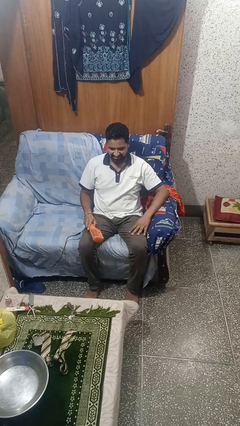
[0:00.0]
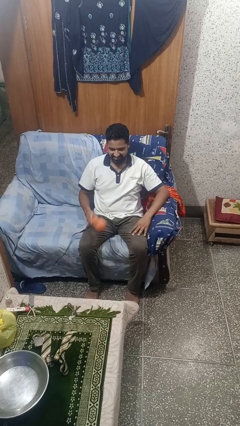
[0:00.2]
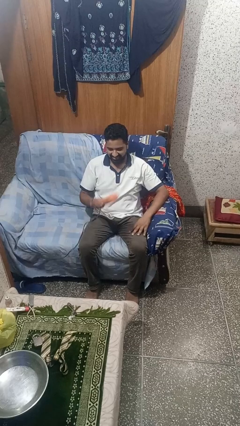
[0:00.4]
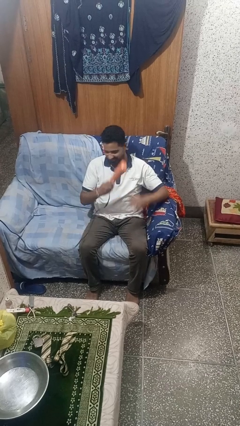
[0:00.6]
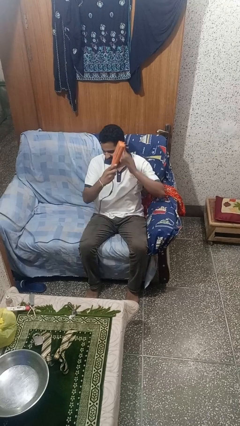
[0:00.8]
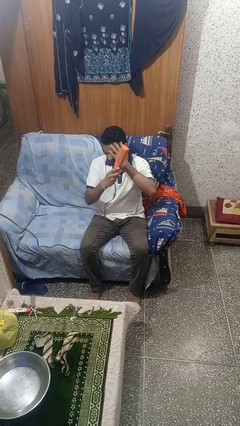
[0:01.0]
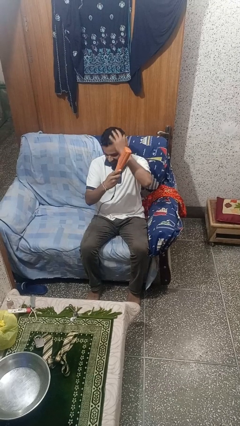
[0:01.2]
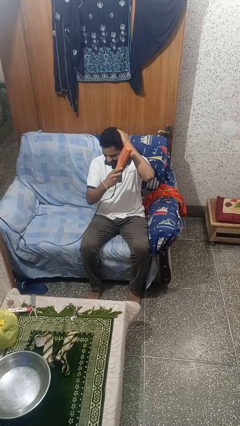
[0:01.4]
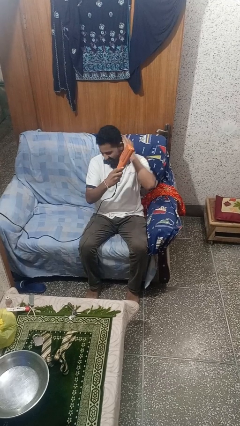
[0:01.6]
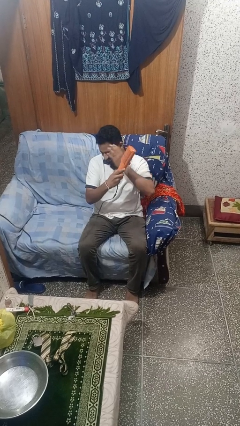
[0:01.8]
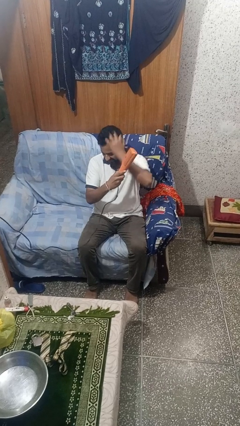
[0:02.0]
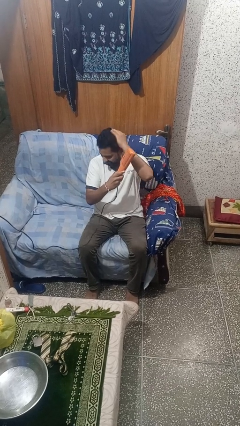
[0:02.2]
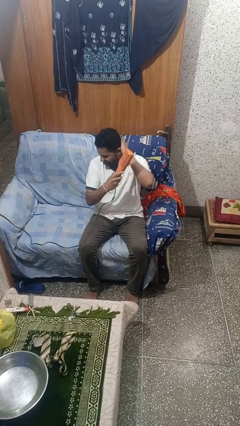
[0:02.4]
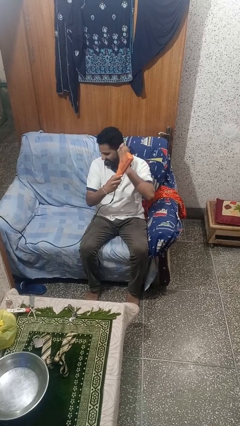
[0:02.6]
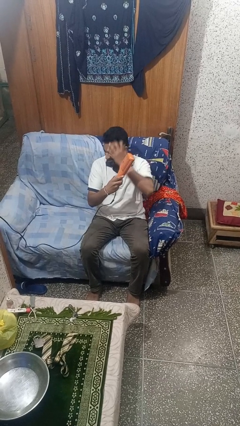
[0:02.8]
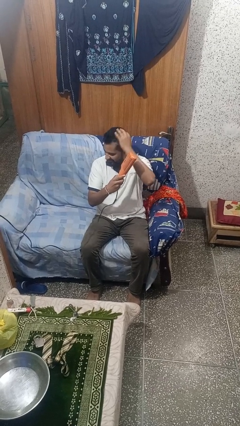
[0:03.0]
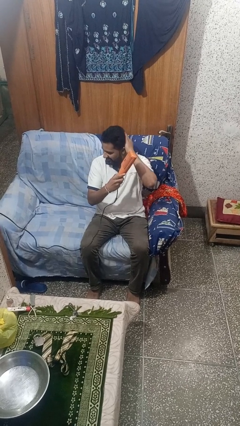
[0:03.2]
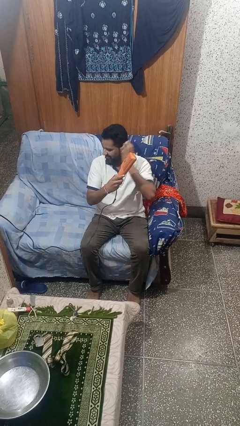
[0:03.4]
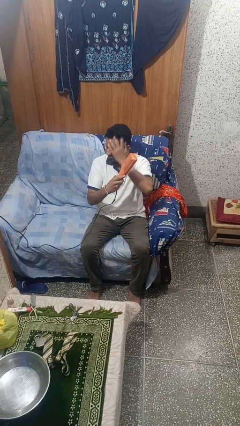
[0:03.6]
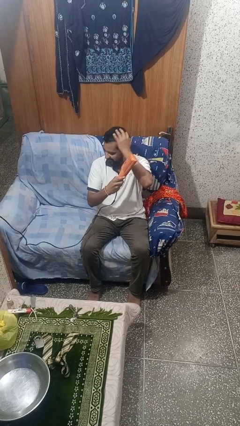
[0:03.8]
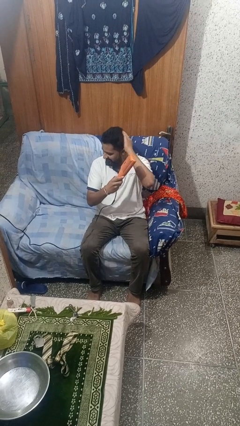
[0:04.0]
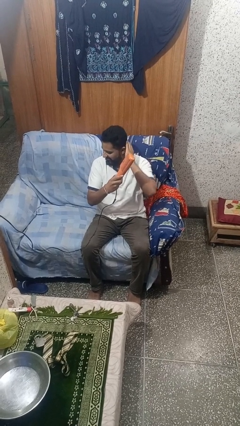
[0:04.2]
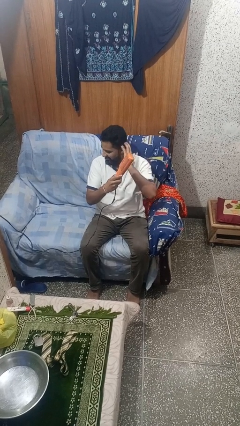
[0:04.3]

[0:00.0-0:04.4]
person dries hair with hairdryer

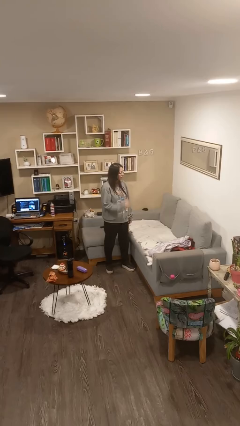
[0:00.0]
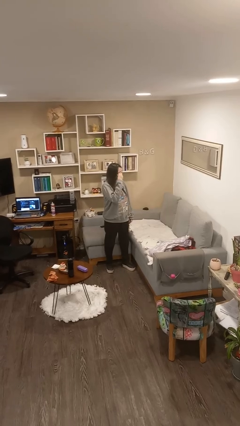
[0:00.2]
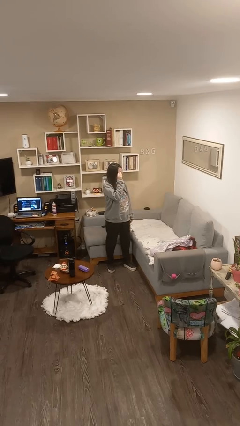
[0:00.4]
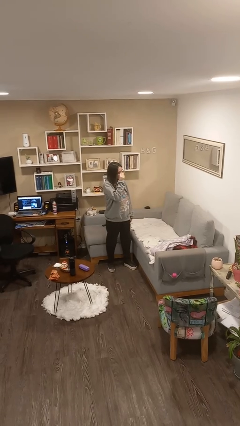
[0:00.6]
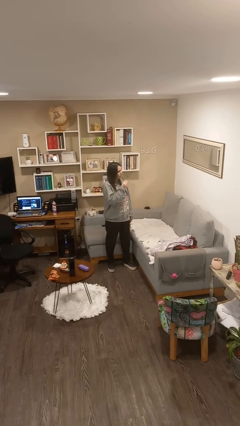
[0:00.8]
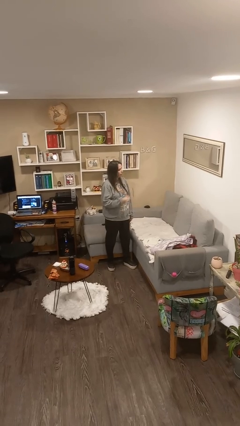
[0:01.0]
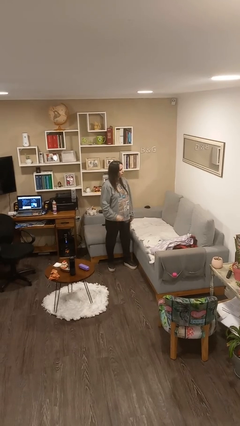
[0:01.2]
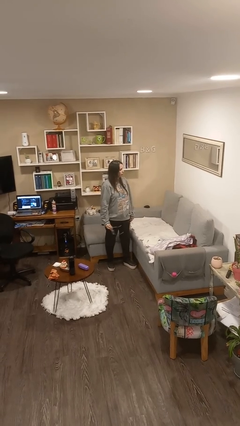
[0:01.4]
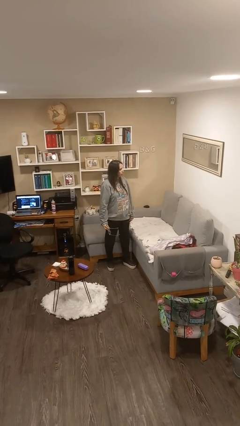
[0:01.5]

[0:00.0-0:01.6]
person takes off glasses

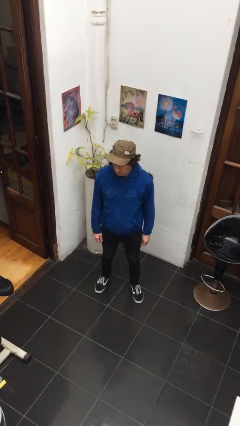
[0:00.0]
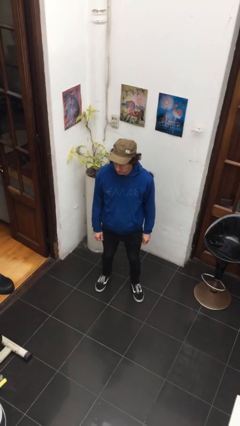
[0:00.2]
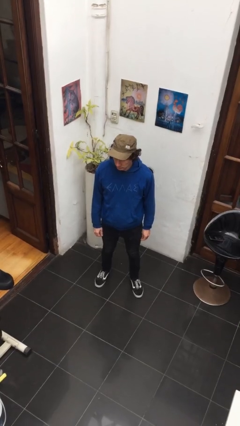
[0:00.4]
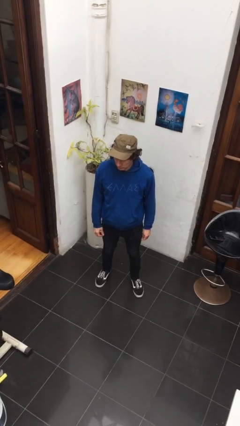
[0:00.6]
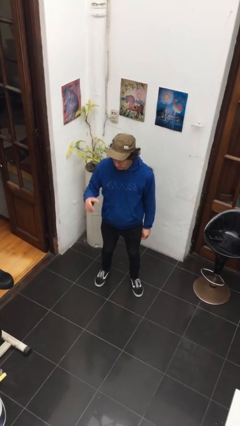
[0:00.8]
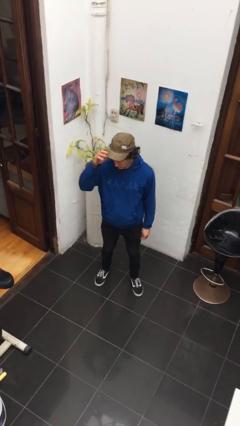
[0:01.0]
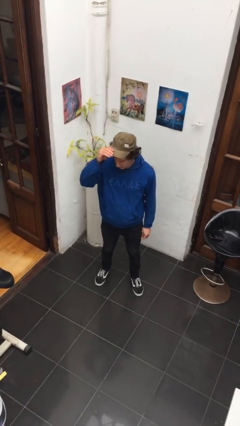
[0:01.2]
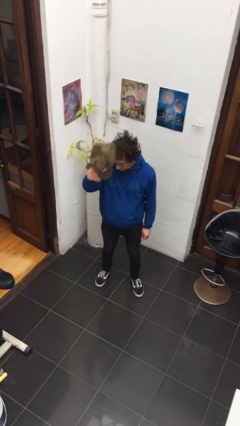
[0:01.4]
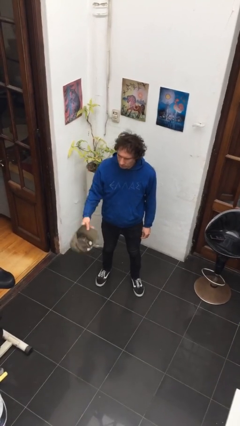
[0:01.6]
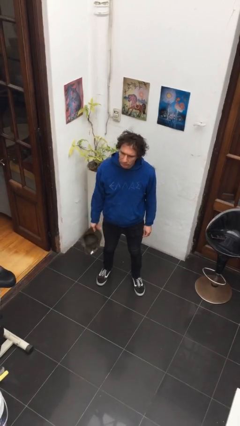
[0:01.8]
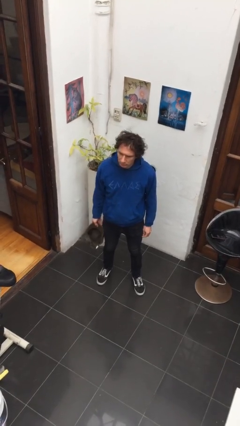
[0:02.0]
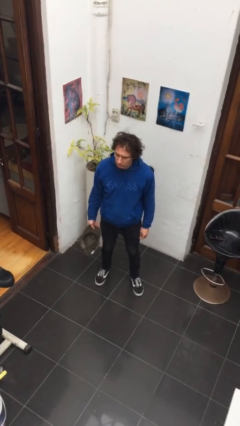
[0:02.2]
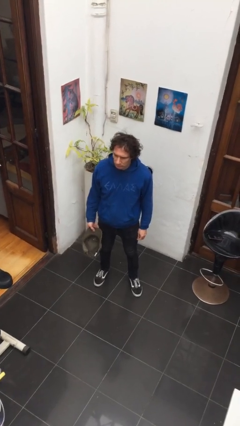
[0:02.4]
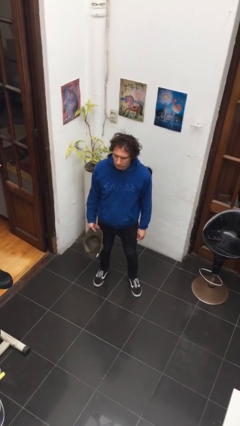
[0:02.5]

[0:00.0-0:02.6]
person takes off hat

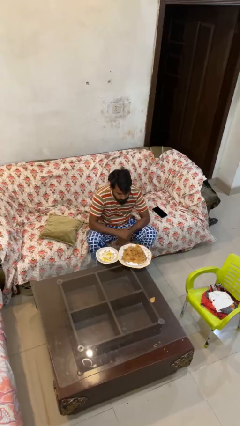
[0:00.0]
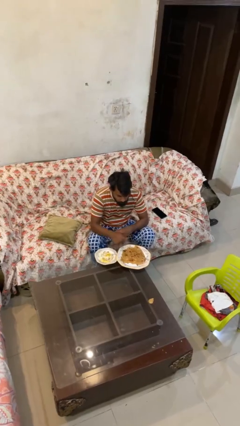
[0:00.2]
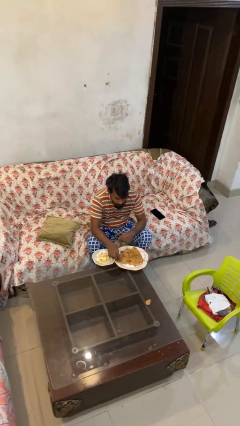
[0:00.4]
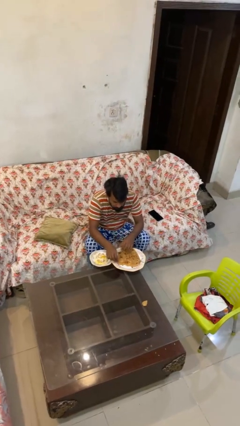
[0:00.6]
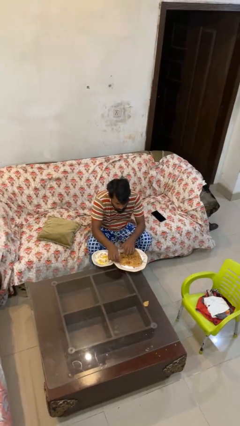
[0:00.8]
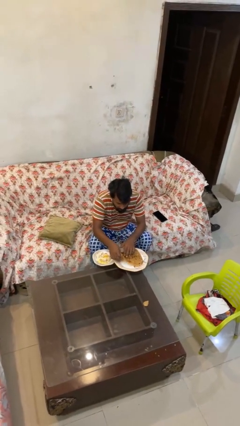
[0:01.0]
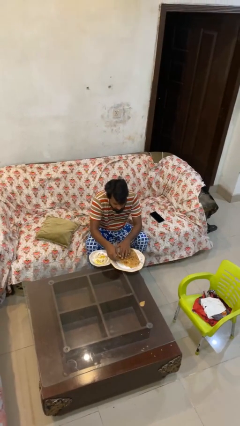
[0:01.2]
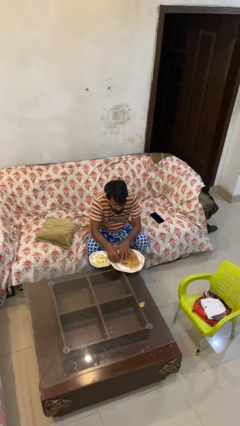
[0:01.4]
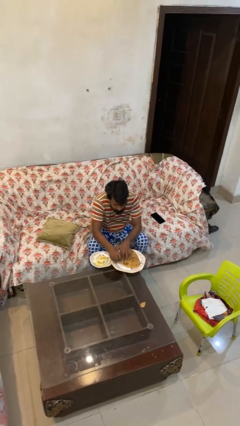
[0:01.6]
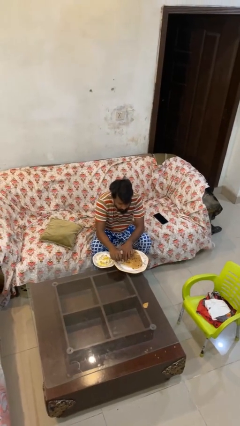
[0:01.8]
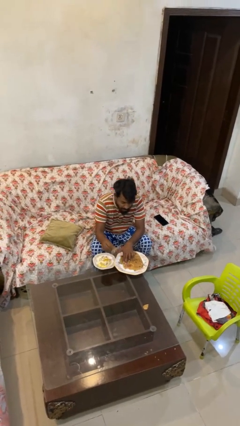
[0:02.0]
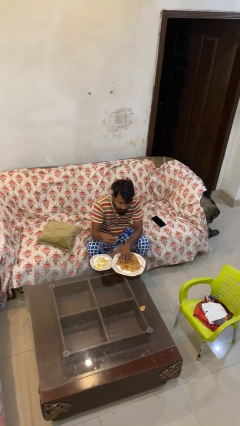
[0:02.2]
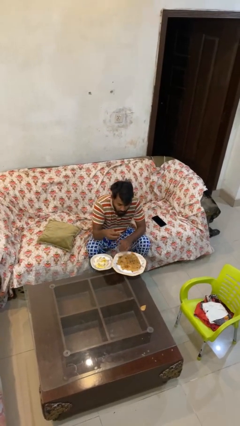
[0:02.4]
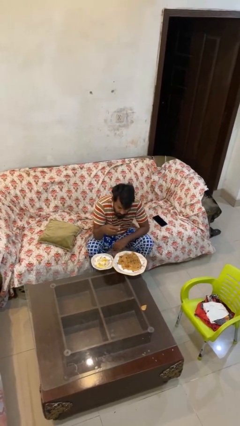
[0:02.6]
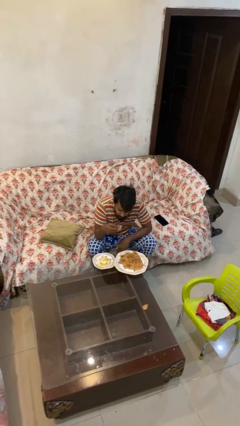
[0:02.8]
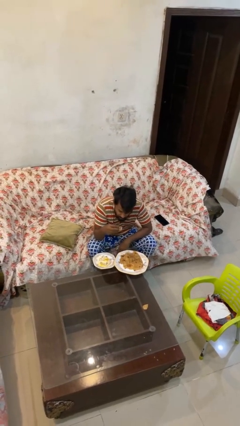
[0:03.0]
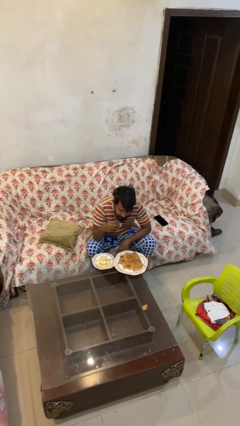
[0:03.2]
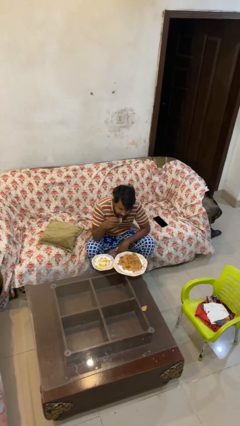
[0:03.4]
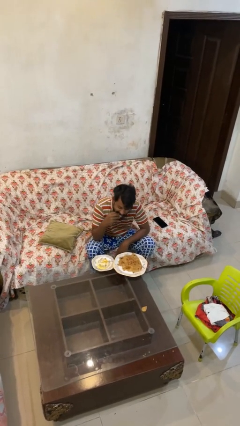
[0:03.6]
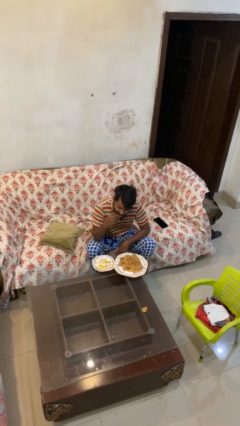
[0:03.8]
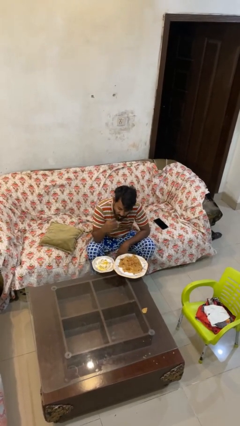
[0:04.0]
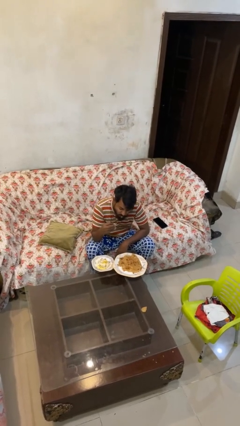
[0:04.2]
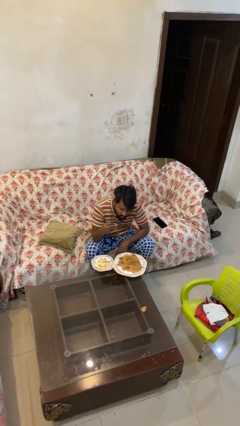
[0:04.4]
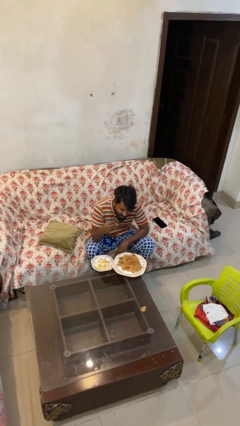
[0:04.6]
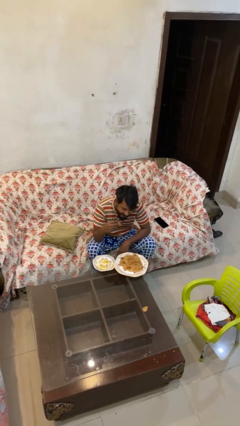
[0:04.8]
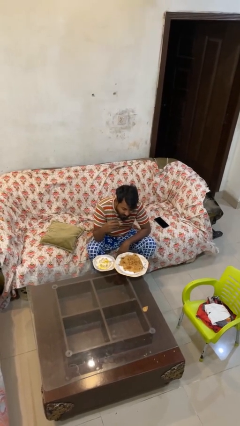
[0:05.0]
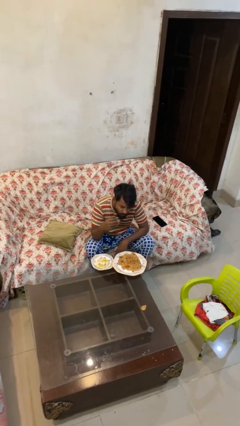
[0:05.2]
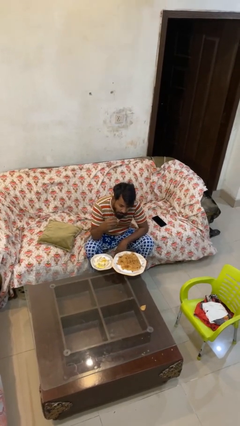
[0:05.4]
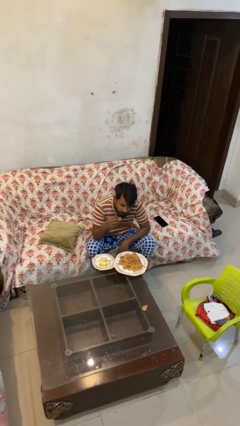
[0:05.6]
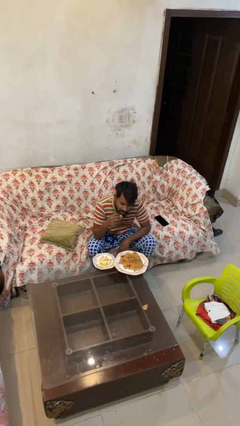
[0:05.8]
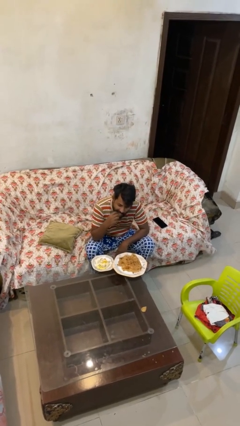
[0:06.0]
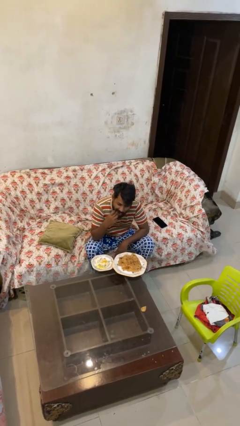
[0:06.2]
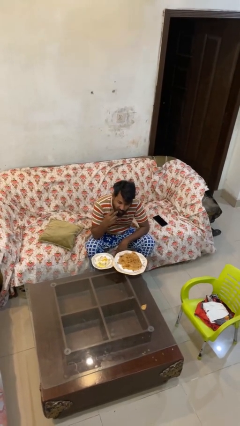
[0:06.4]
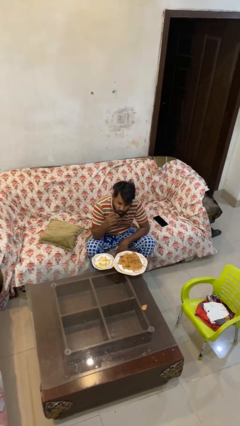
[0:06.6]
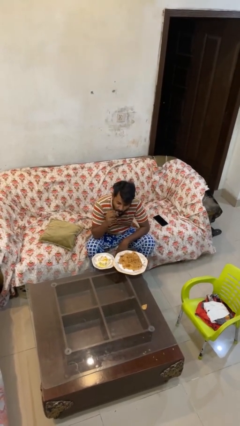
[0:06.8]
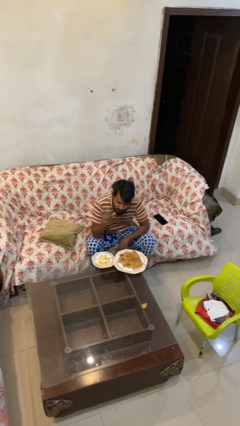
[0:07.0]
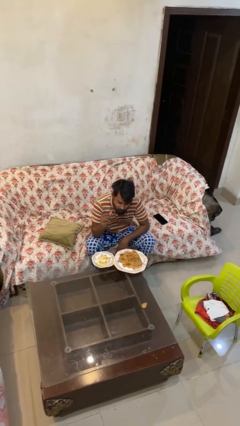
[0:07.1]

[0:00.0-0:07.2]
person eats with hands

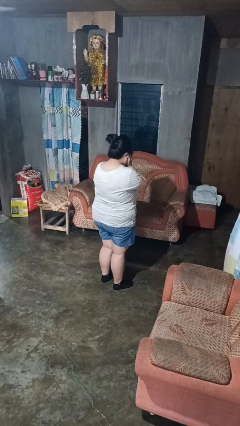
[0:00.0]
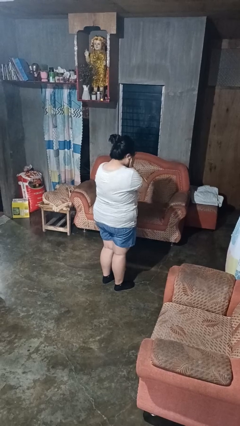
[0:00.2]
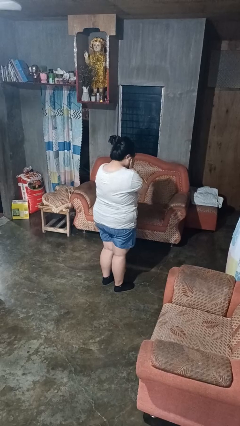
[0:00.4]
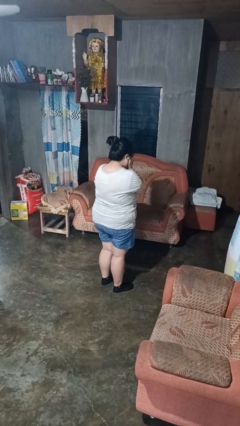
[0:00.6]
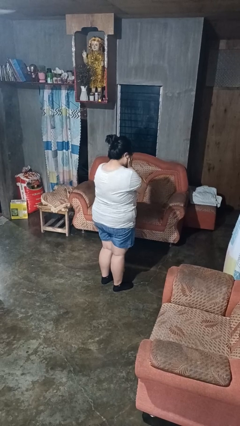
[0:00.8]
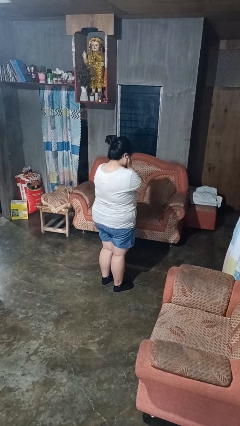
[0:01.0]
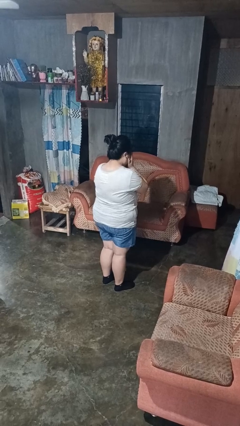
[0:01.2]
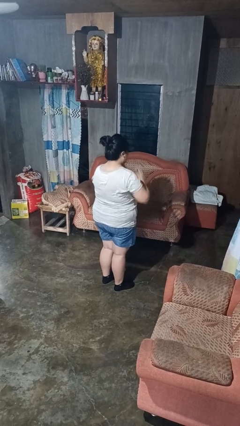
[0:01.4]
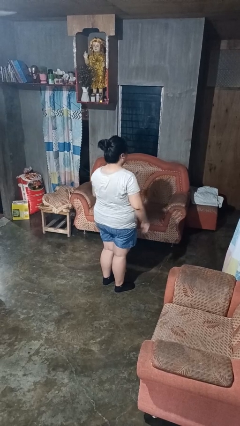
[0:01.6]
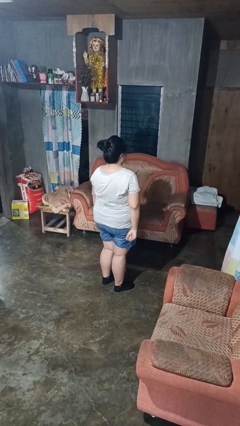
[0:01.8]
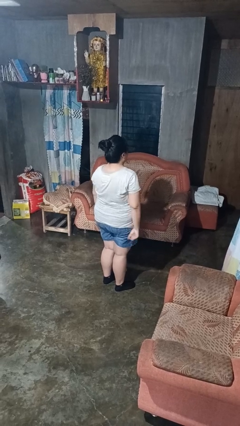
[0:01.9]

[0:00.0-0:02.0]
person covers face with hands

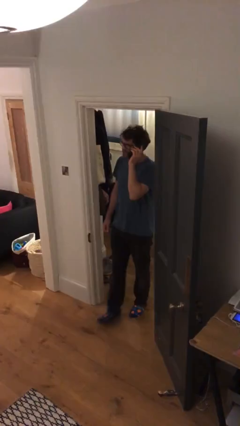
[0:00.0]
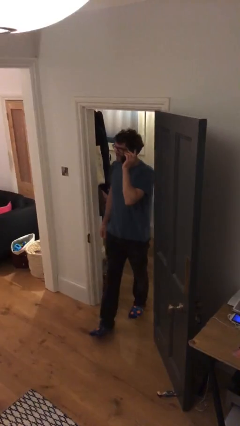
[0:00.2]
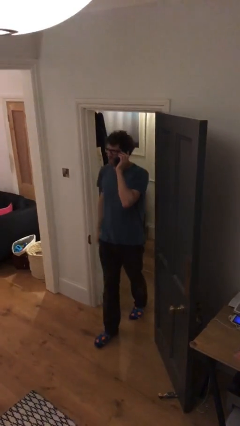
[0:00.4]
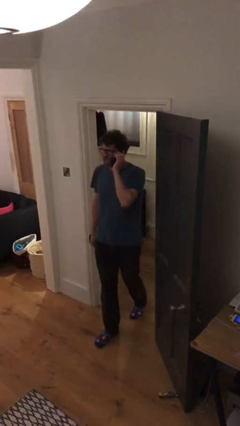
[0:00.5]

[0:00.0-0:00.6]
person enters scene through structure
